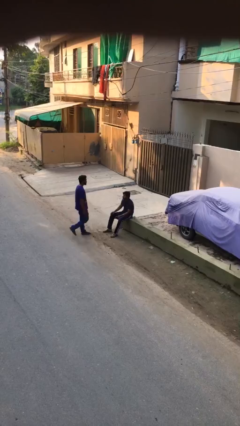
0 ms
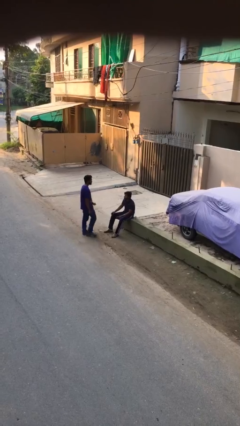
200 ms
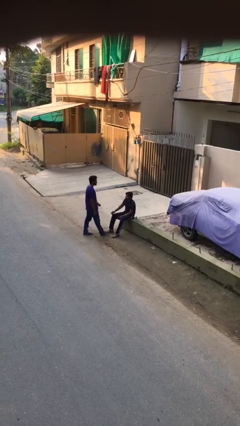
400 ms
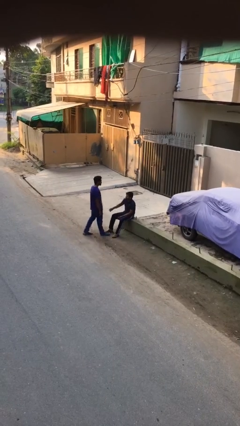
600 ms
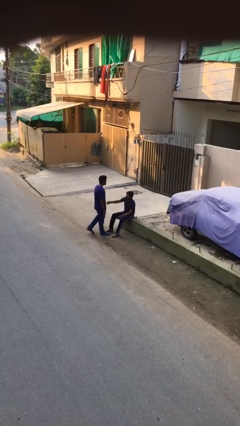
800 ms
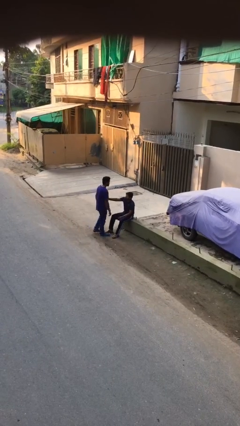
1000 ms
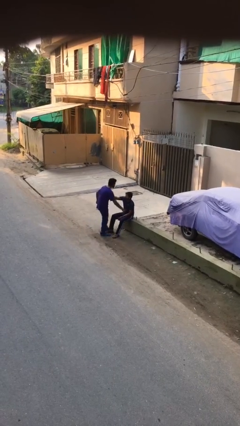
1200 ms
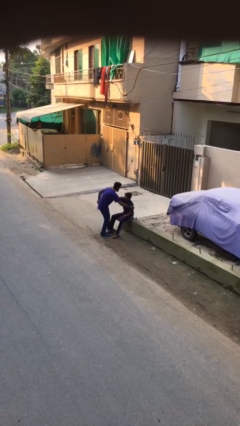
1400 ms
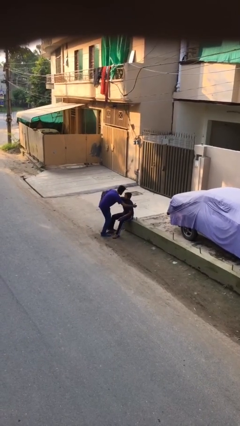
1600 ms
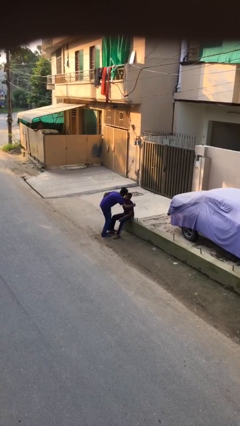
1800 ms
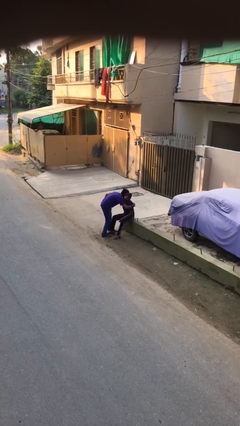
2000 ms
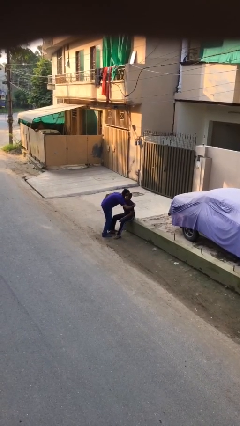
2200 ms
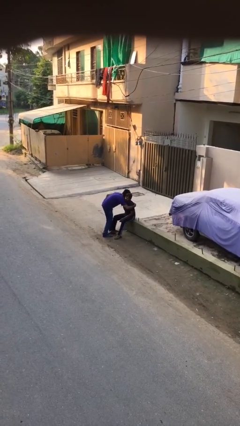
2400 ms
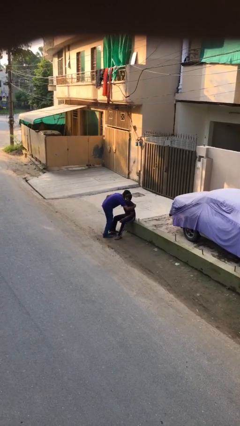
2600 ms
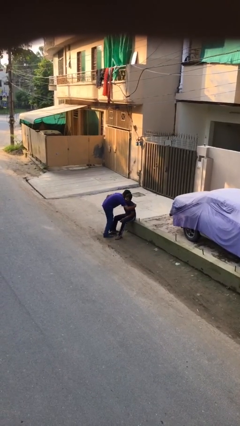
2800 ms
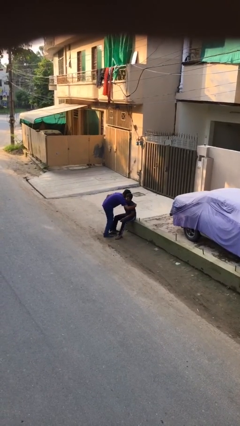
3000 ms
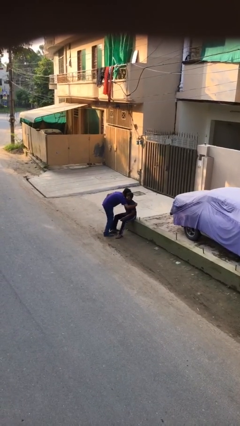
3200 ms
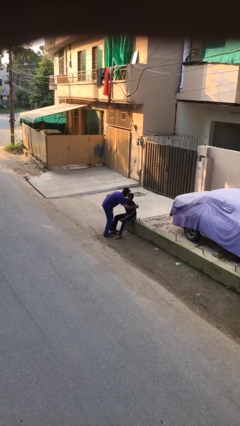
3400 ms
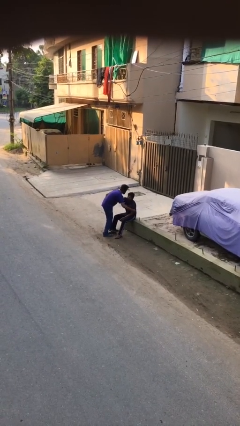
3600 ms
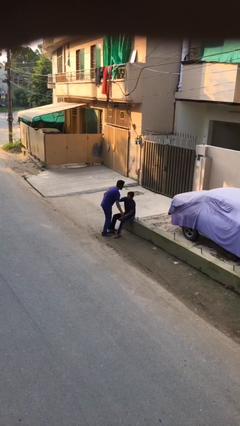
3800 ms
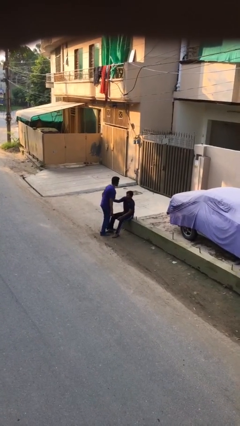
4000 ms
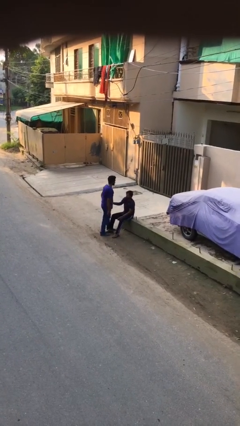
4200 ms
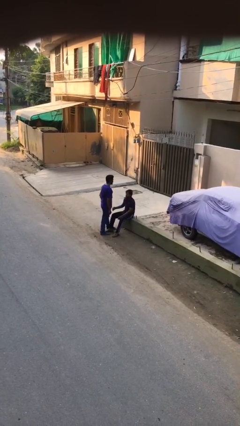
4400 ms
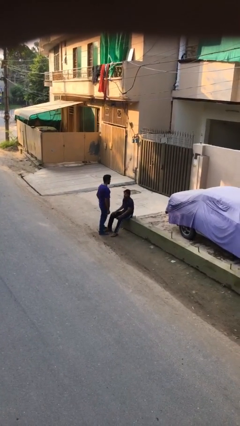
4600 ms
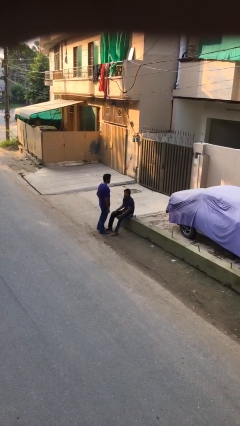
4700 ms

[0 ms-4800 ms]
person embraces person

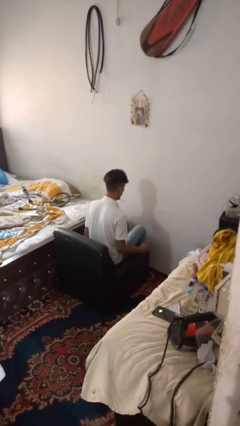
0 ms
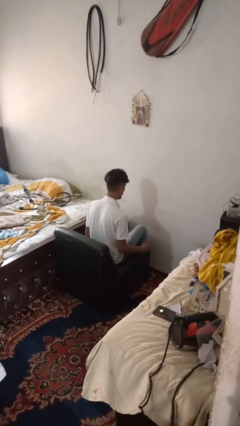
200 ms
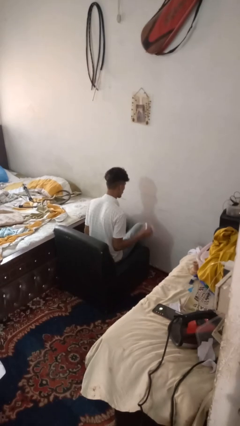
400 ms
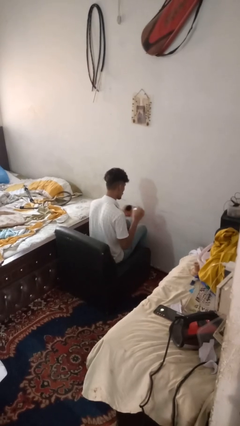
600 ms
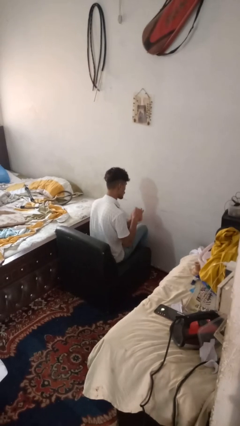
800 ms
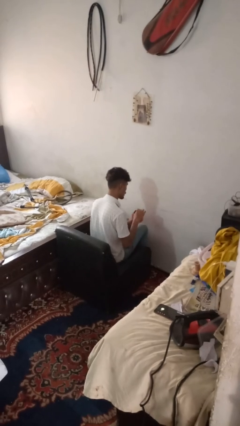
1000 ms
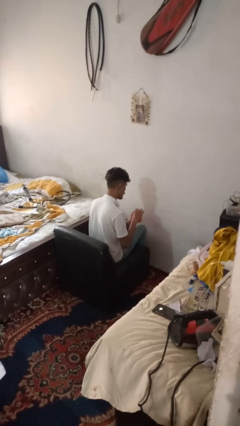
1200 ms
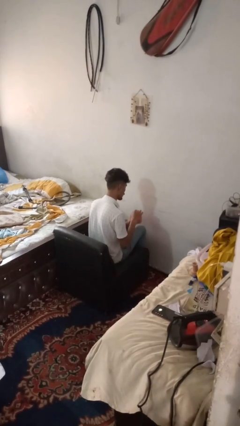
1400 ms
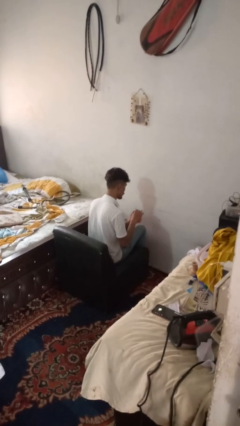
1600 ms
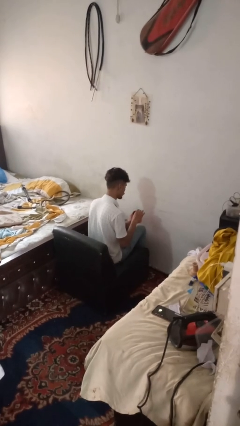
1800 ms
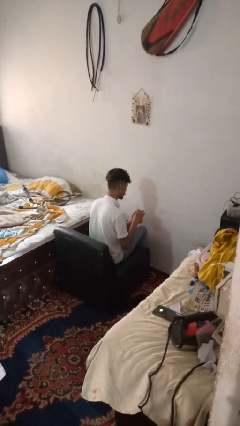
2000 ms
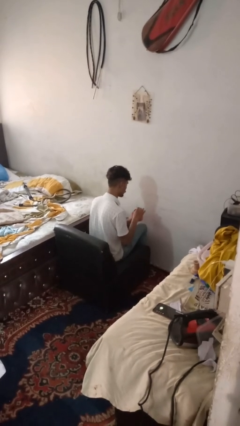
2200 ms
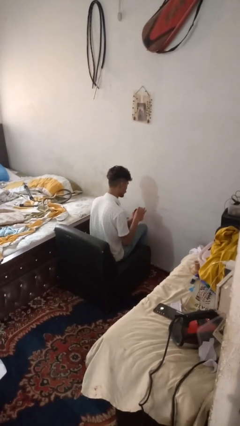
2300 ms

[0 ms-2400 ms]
person stirs mug

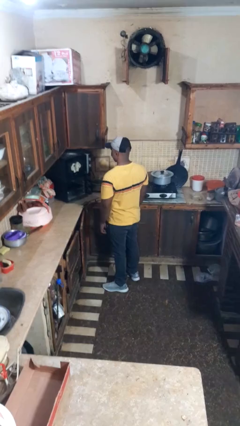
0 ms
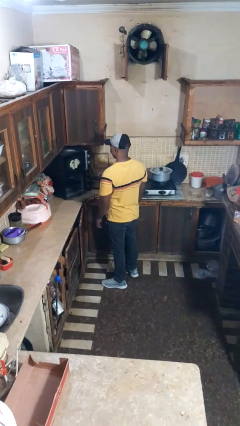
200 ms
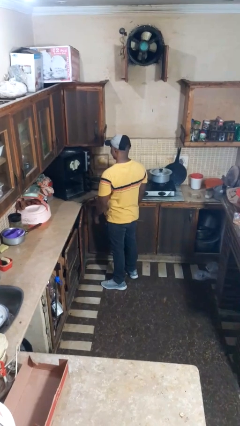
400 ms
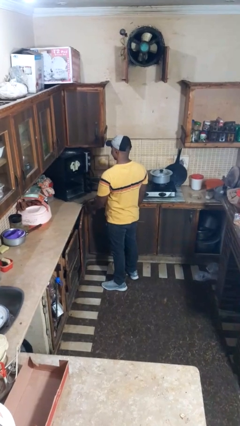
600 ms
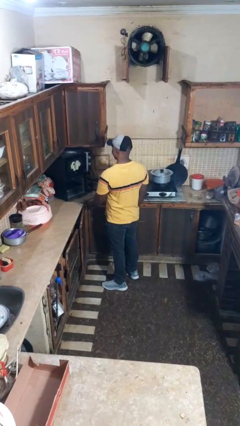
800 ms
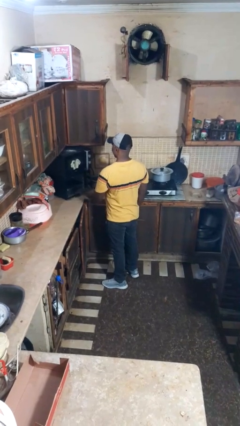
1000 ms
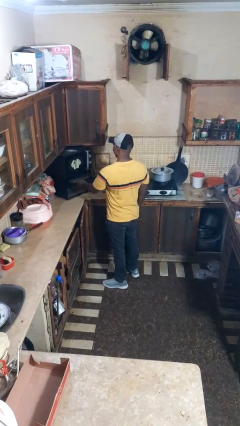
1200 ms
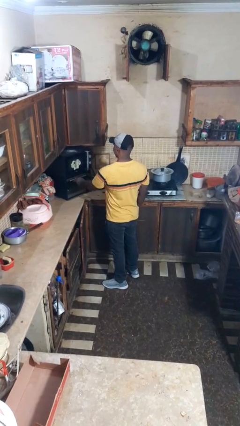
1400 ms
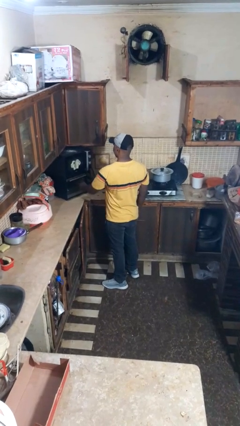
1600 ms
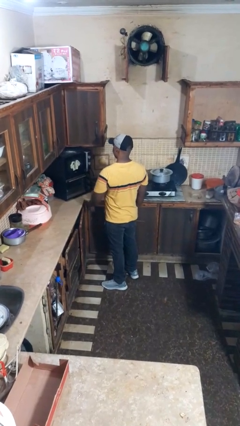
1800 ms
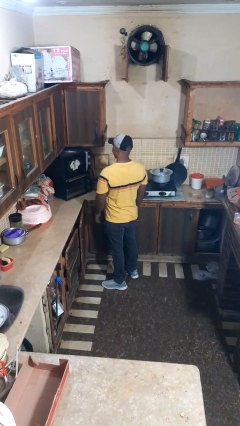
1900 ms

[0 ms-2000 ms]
person closes oven door

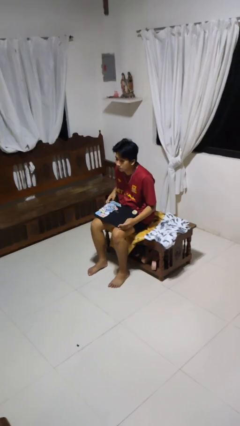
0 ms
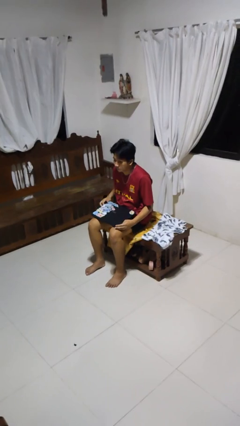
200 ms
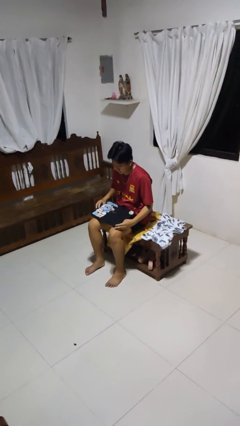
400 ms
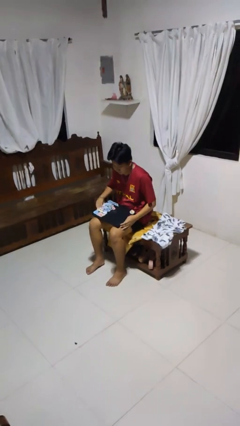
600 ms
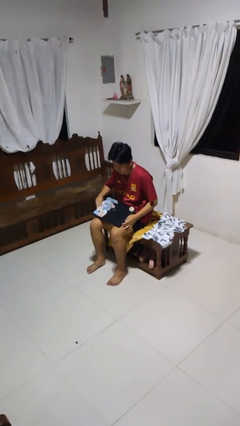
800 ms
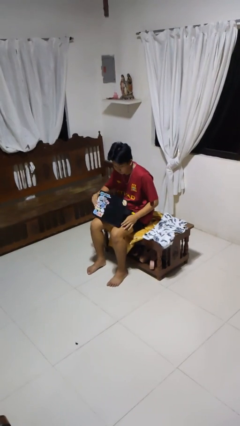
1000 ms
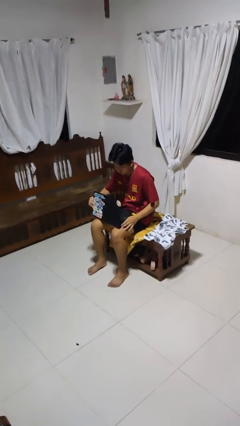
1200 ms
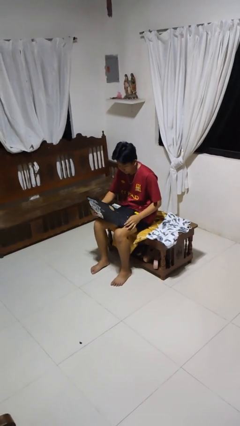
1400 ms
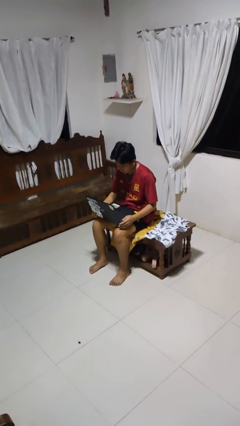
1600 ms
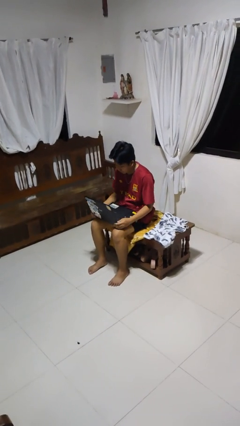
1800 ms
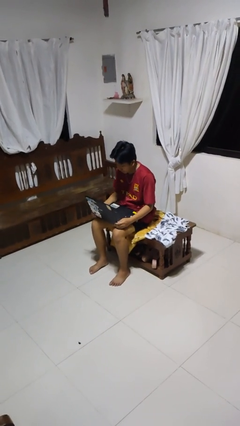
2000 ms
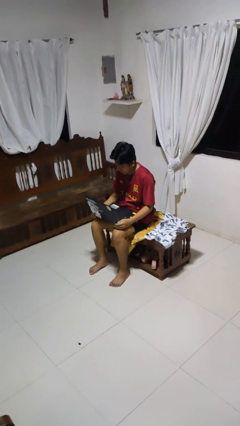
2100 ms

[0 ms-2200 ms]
person opens laptop

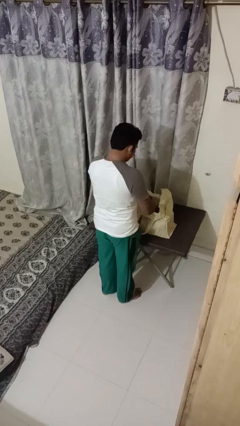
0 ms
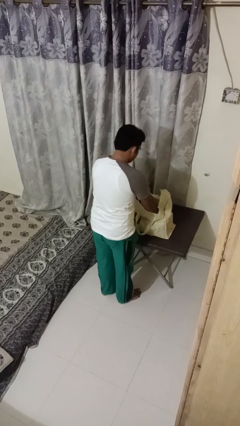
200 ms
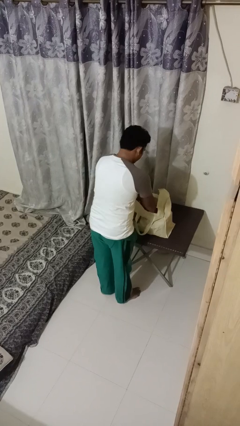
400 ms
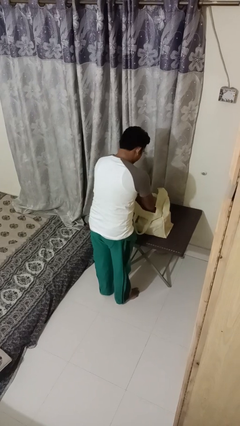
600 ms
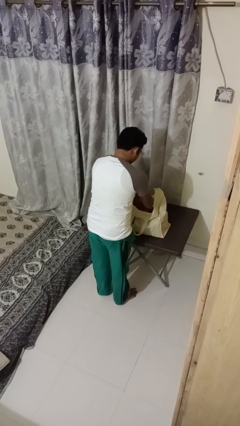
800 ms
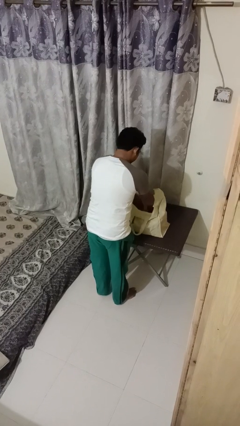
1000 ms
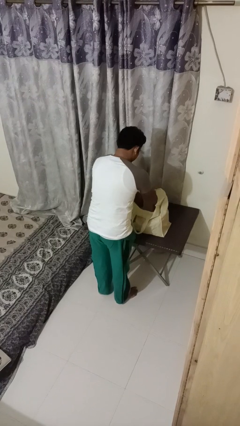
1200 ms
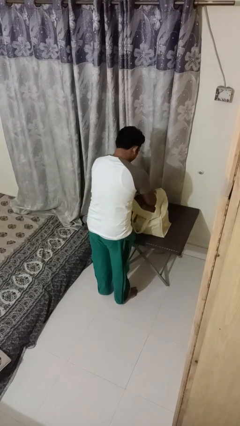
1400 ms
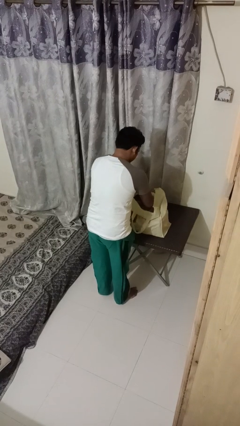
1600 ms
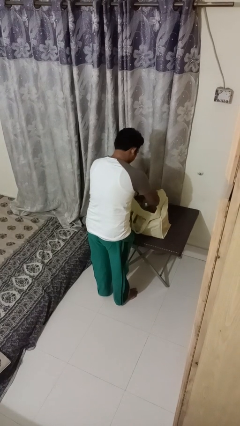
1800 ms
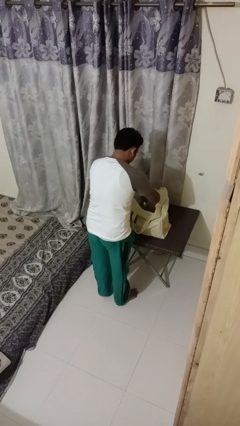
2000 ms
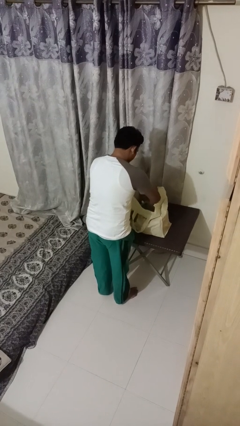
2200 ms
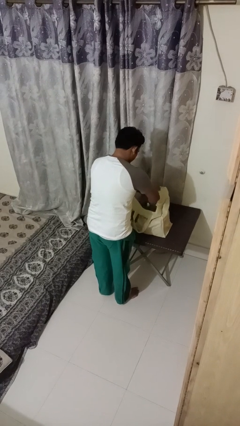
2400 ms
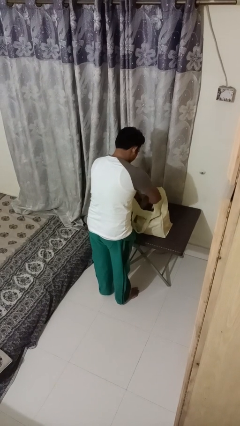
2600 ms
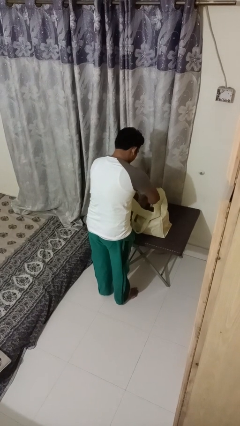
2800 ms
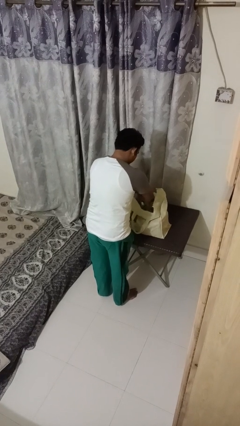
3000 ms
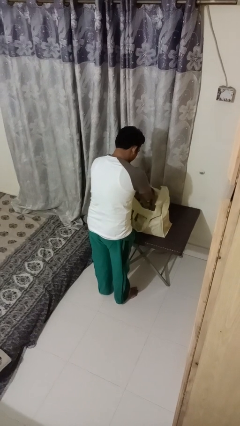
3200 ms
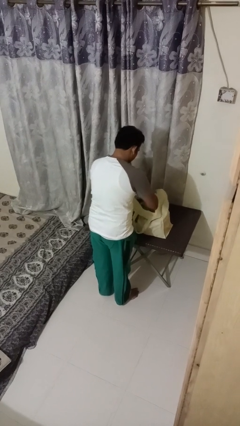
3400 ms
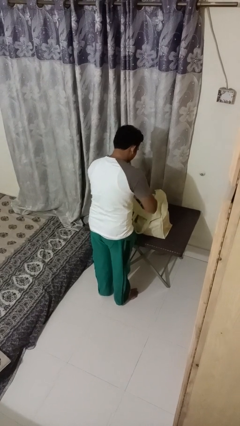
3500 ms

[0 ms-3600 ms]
person searches in bag

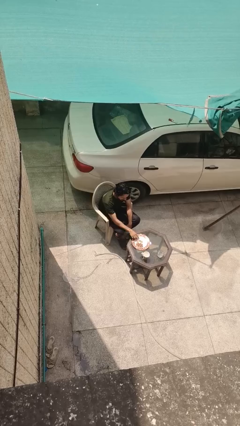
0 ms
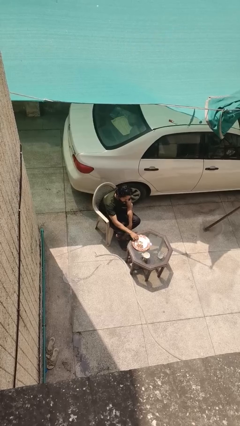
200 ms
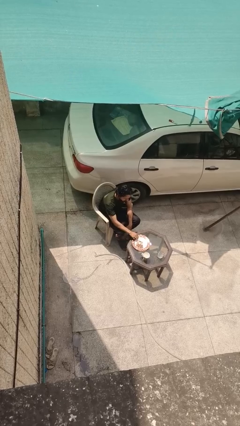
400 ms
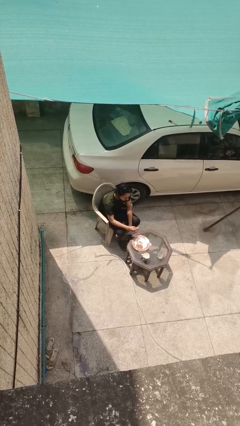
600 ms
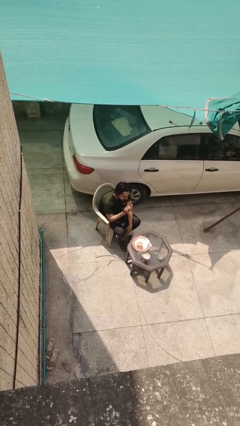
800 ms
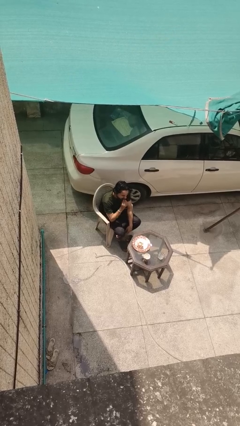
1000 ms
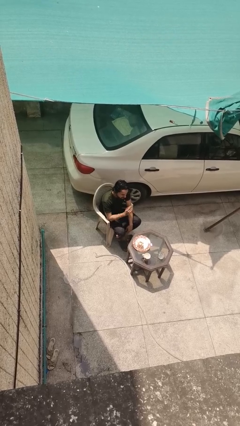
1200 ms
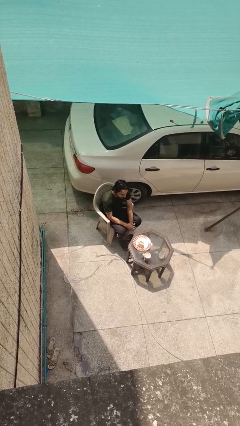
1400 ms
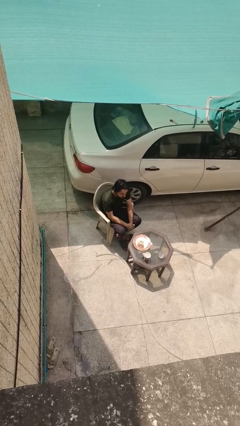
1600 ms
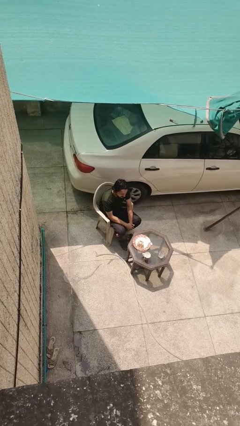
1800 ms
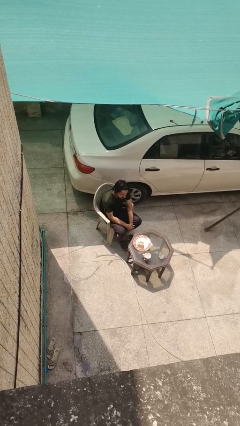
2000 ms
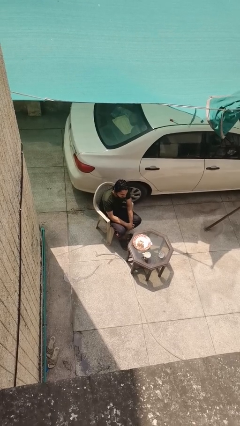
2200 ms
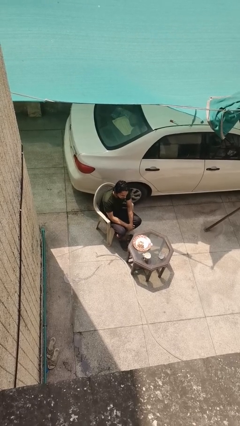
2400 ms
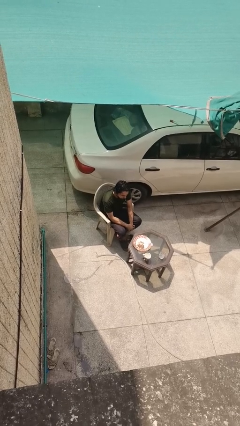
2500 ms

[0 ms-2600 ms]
person eats with hands
